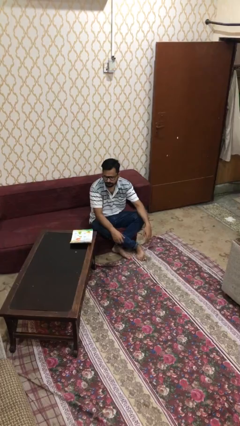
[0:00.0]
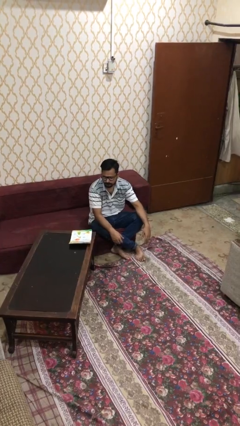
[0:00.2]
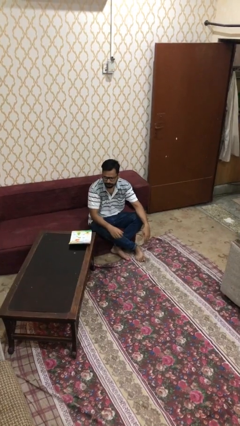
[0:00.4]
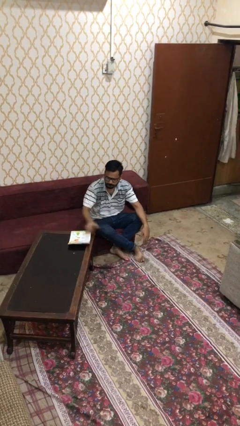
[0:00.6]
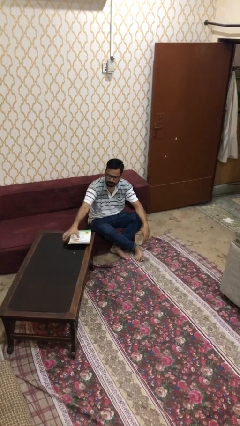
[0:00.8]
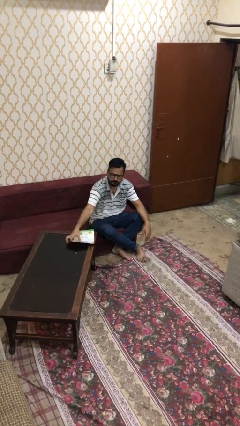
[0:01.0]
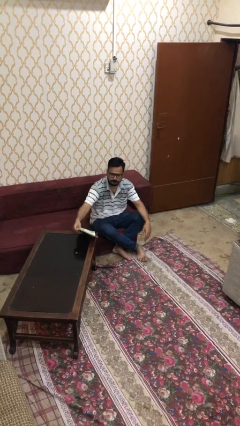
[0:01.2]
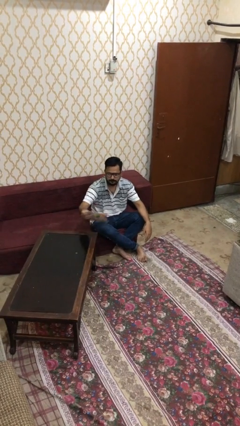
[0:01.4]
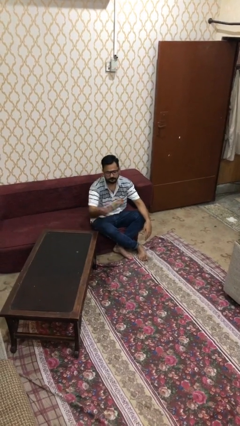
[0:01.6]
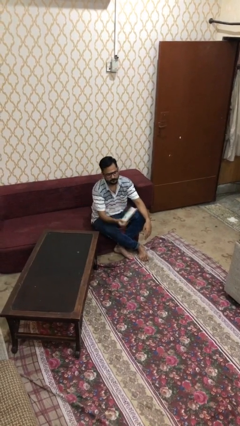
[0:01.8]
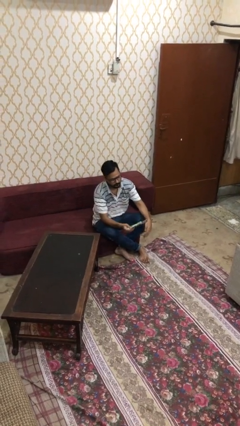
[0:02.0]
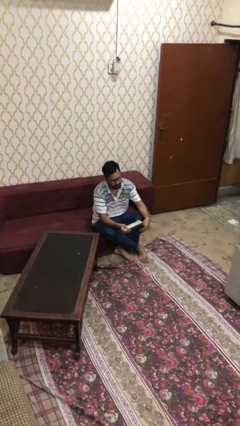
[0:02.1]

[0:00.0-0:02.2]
person picks up object from table

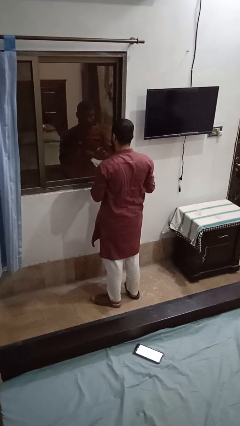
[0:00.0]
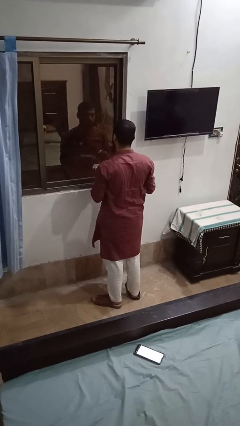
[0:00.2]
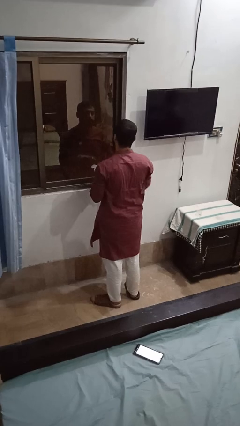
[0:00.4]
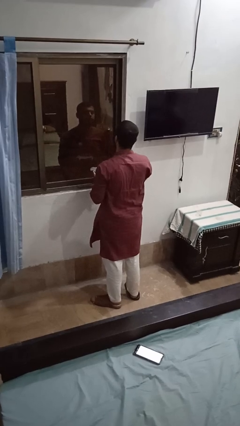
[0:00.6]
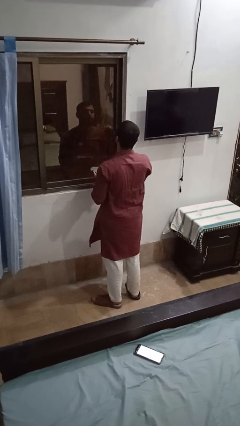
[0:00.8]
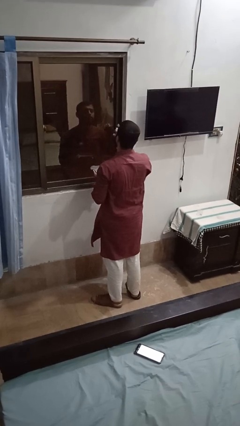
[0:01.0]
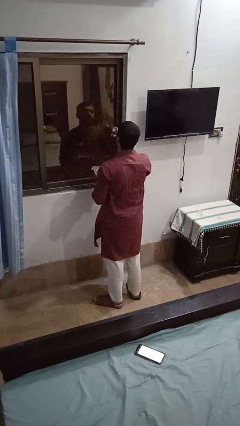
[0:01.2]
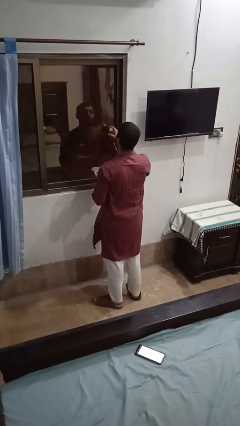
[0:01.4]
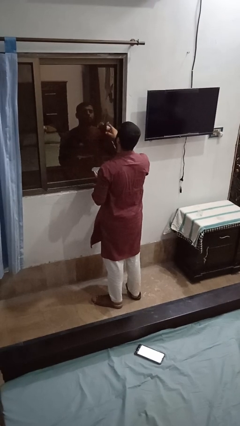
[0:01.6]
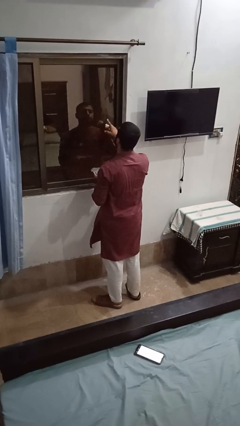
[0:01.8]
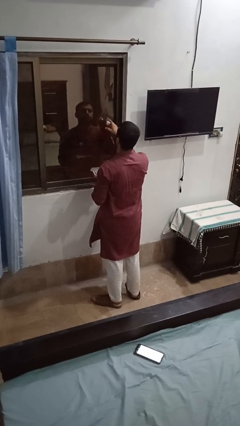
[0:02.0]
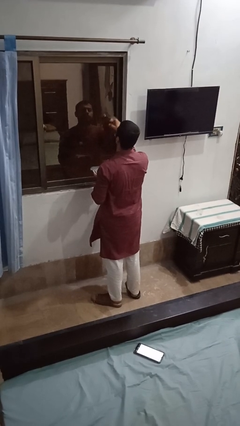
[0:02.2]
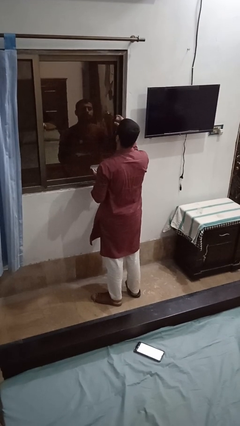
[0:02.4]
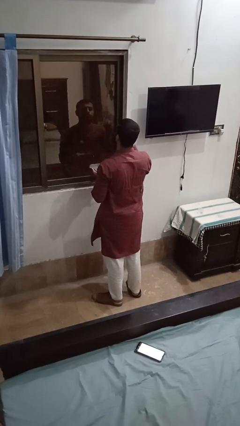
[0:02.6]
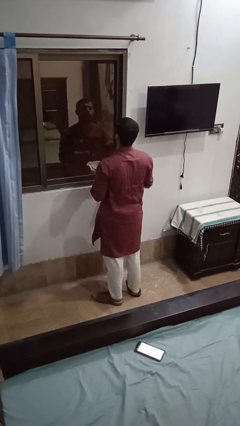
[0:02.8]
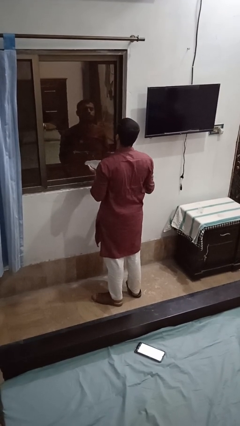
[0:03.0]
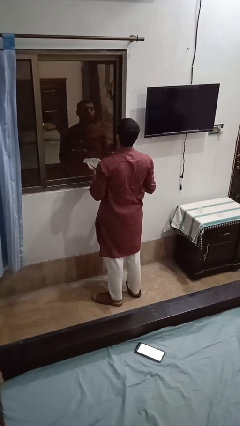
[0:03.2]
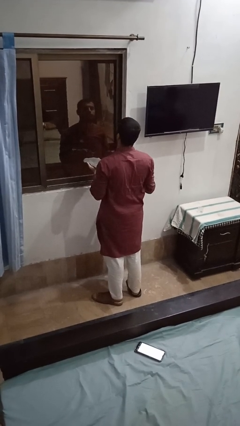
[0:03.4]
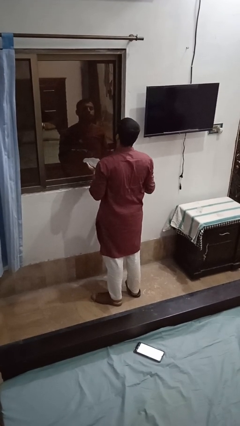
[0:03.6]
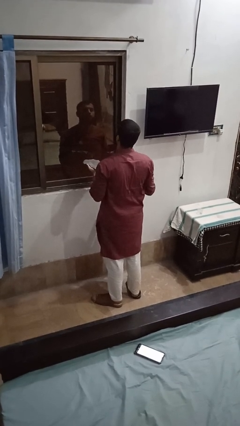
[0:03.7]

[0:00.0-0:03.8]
person sprays from bottle

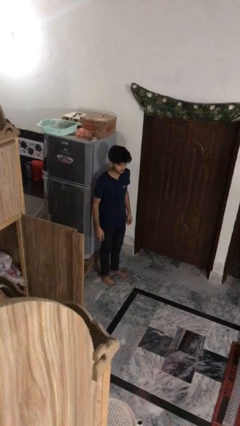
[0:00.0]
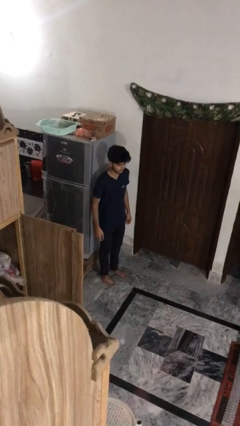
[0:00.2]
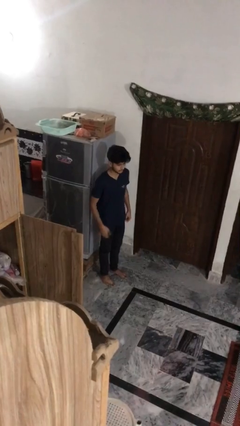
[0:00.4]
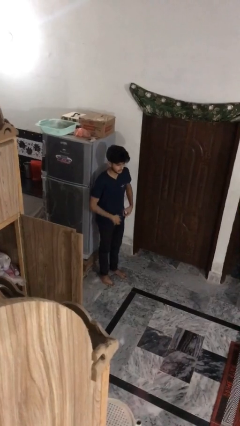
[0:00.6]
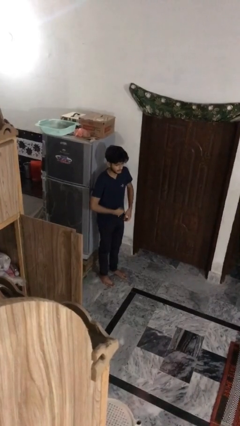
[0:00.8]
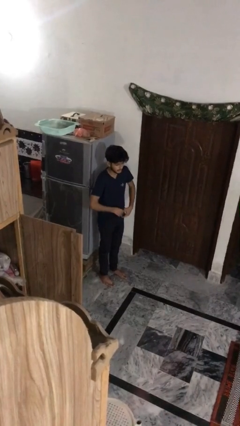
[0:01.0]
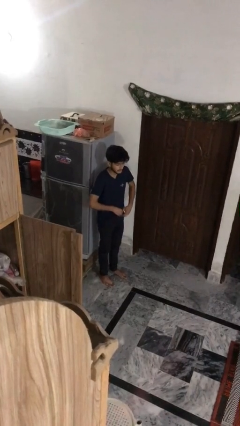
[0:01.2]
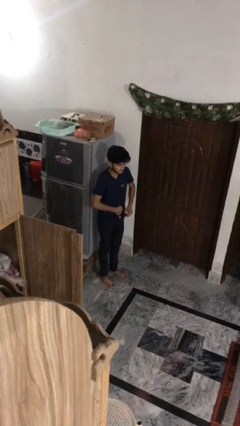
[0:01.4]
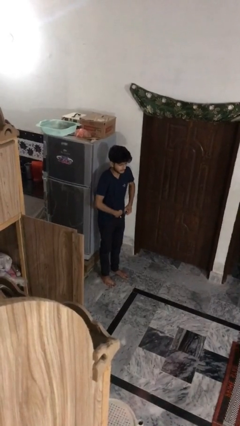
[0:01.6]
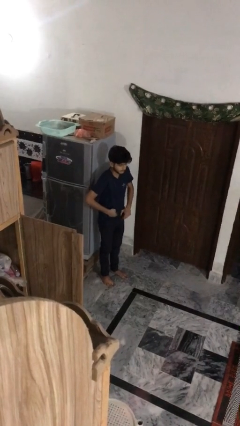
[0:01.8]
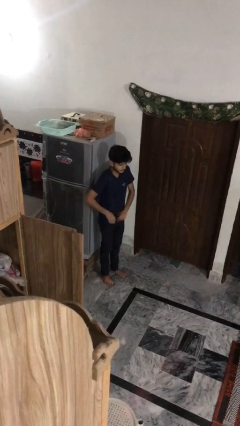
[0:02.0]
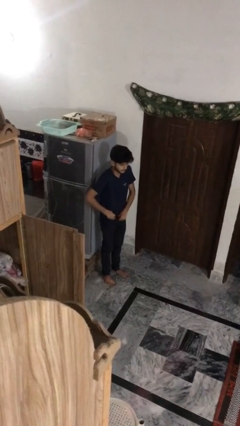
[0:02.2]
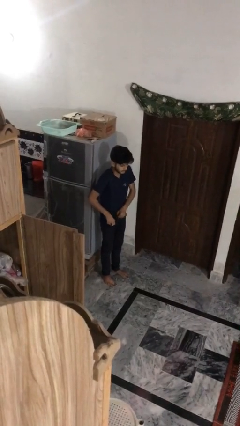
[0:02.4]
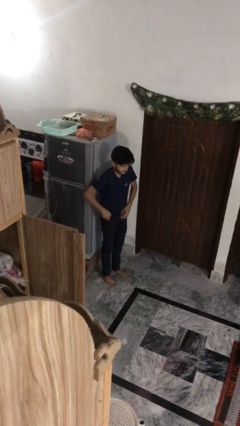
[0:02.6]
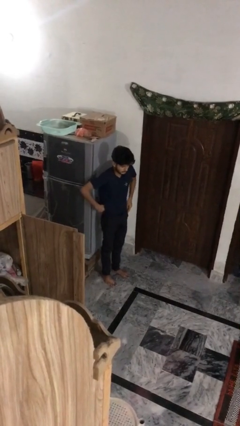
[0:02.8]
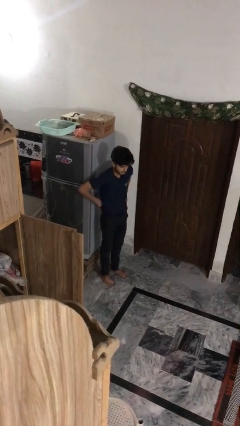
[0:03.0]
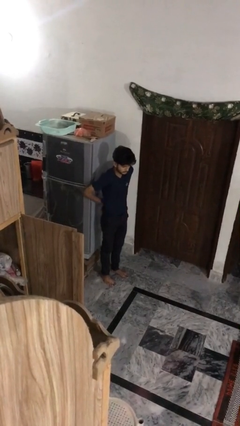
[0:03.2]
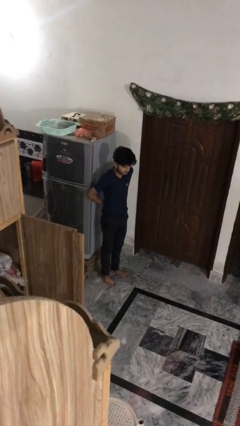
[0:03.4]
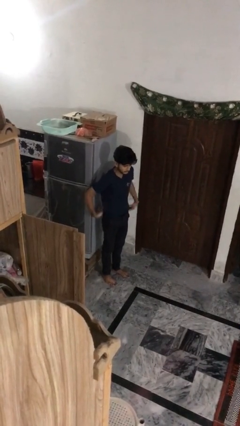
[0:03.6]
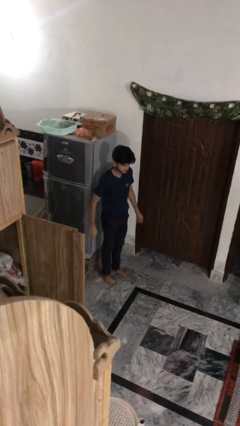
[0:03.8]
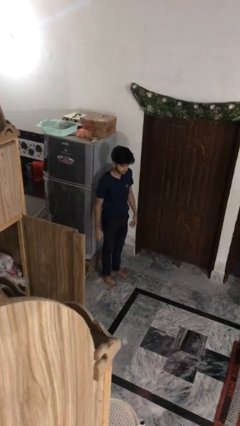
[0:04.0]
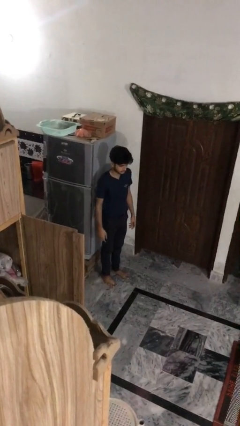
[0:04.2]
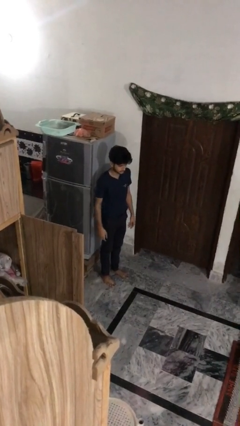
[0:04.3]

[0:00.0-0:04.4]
person tucks in shirt

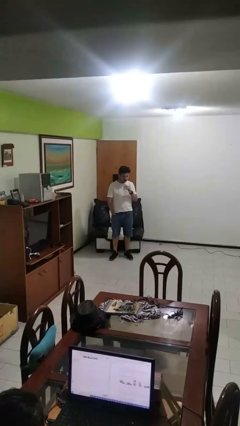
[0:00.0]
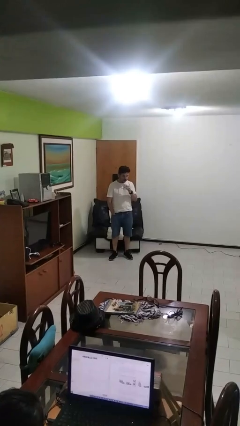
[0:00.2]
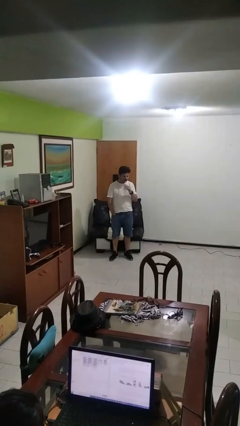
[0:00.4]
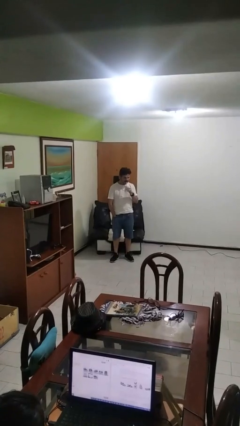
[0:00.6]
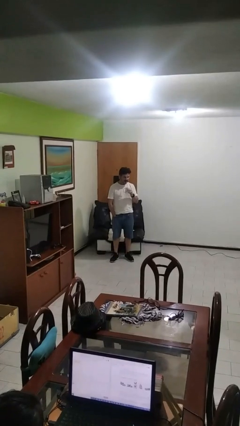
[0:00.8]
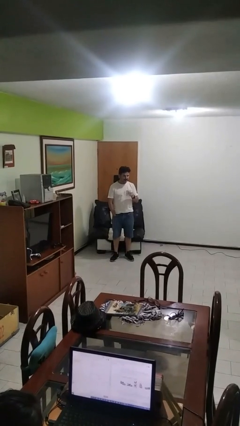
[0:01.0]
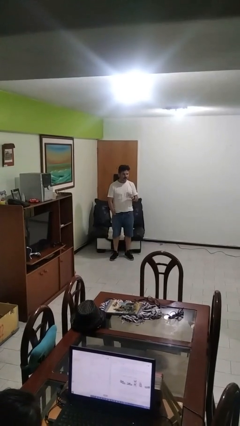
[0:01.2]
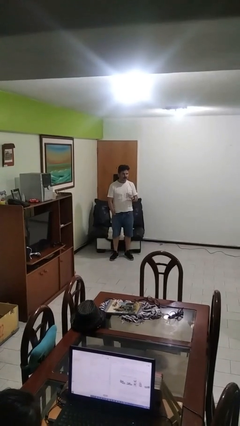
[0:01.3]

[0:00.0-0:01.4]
person drinks from straw

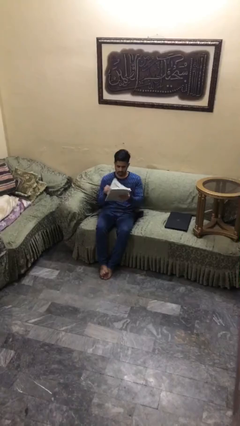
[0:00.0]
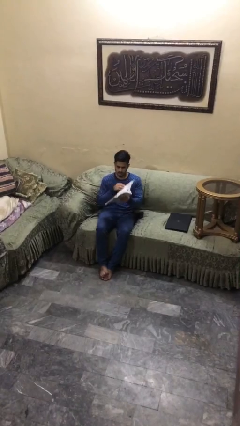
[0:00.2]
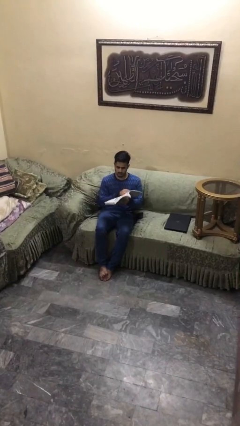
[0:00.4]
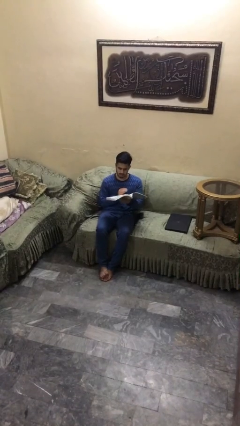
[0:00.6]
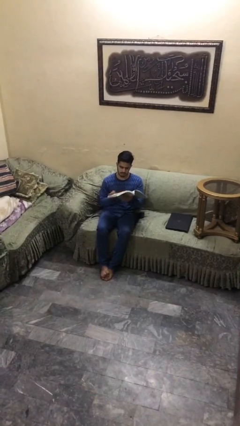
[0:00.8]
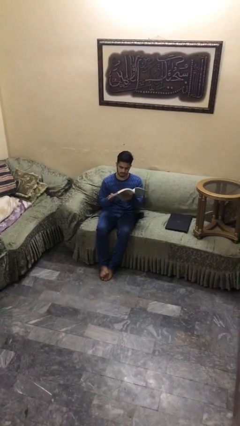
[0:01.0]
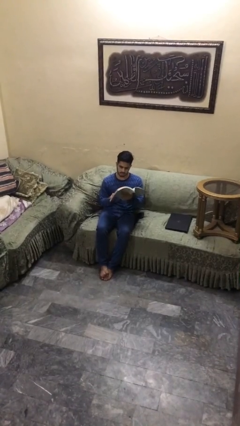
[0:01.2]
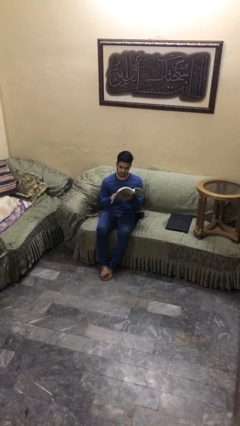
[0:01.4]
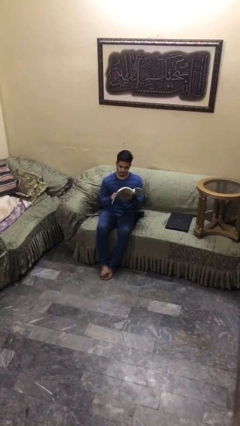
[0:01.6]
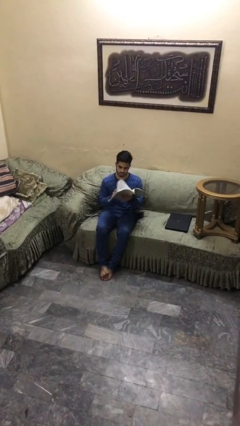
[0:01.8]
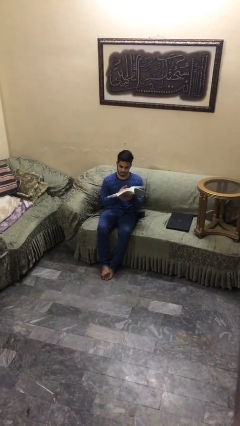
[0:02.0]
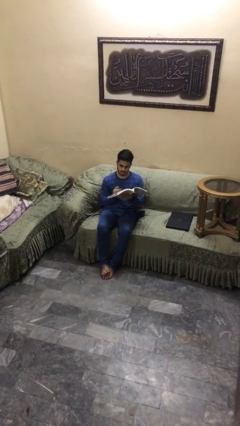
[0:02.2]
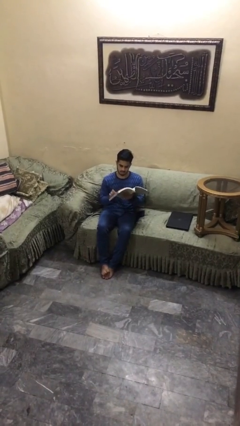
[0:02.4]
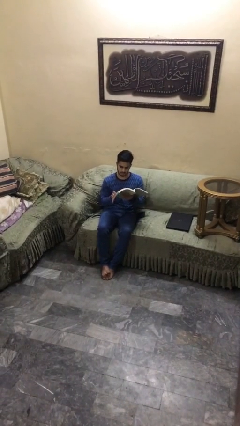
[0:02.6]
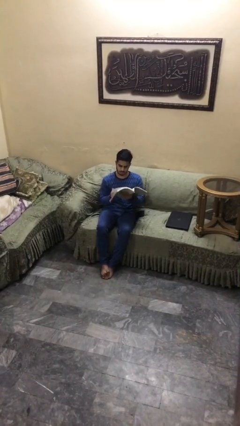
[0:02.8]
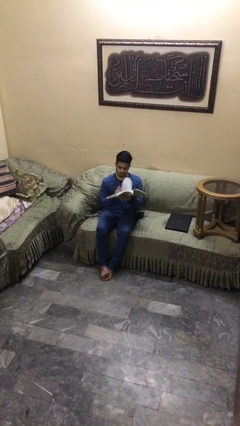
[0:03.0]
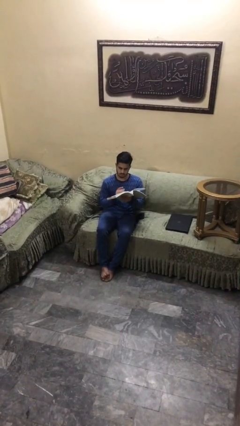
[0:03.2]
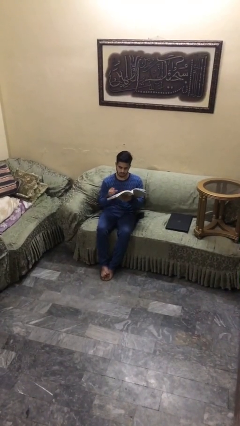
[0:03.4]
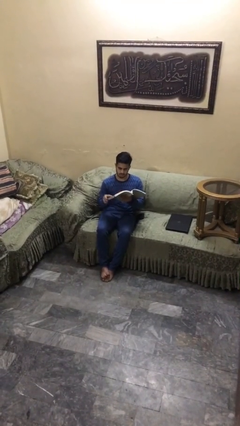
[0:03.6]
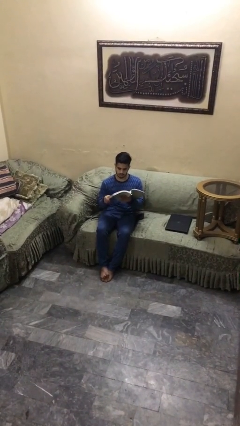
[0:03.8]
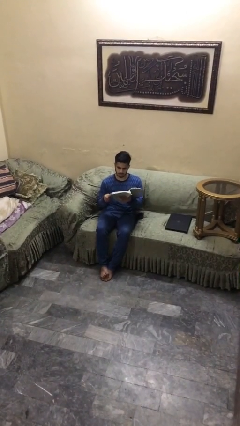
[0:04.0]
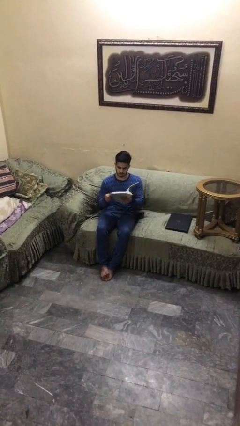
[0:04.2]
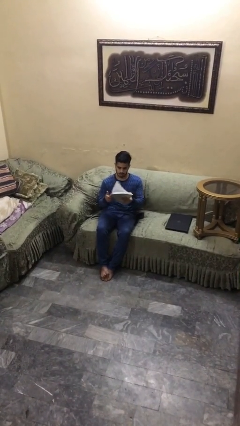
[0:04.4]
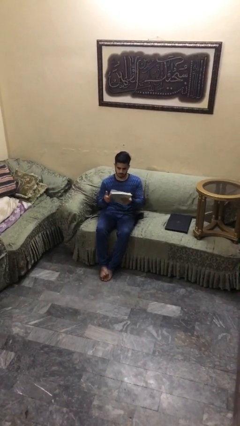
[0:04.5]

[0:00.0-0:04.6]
person reads document

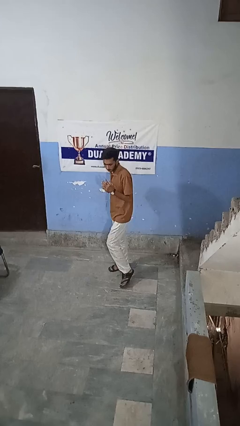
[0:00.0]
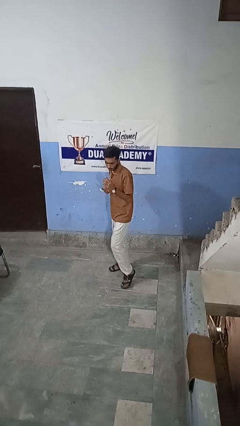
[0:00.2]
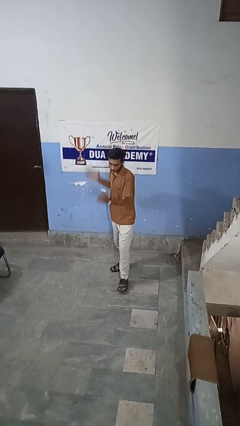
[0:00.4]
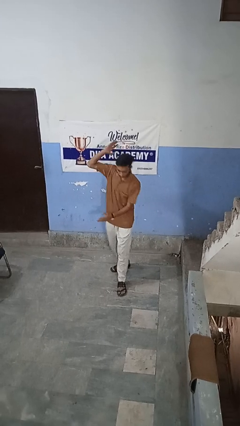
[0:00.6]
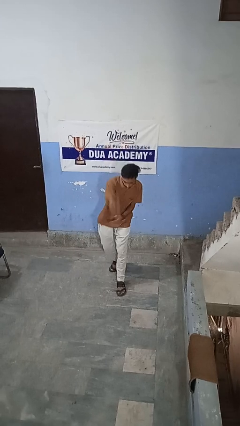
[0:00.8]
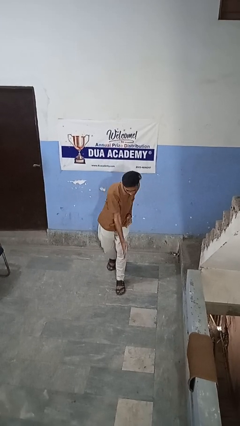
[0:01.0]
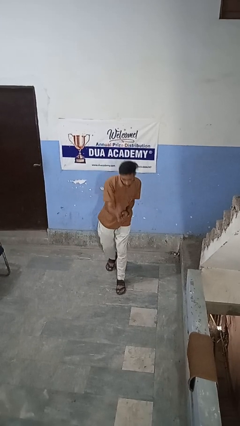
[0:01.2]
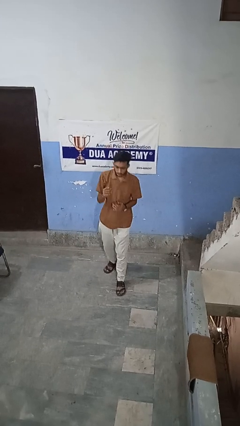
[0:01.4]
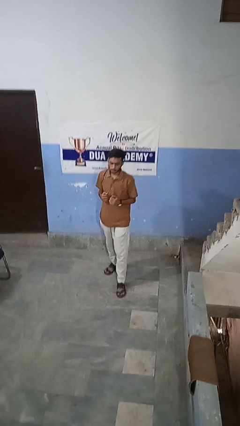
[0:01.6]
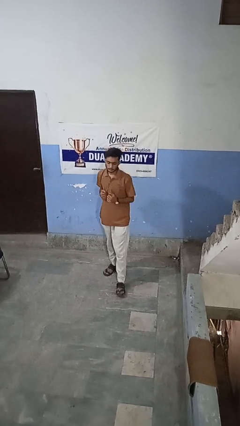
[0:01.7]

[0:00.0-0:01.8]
person karate chop
